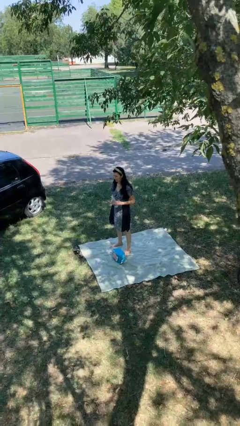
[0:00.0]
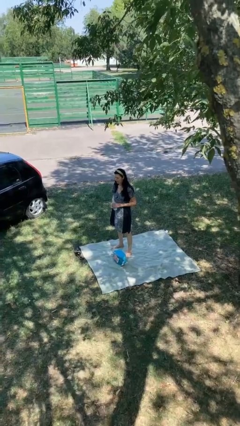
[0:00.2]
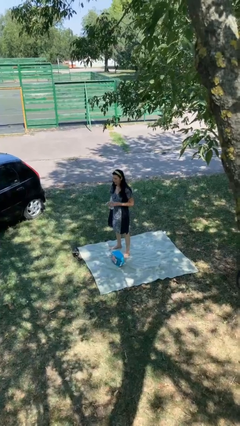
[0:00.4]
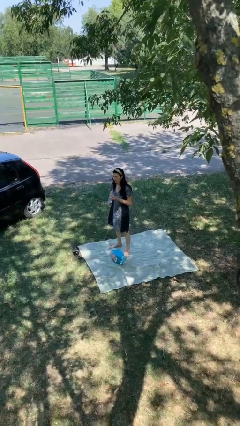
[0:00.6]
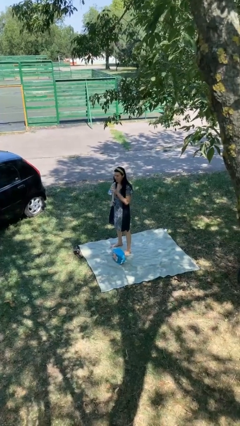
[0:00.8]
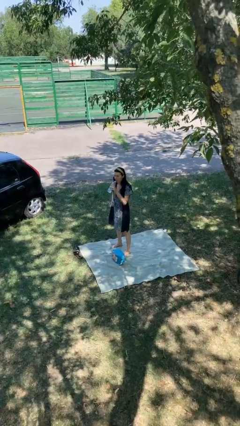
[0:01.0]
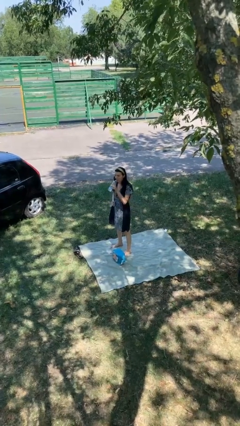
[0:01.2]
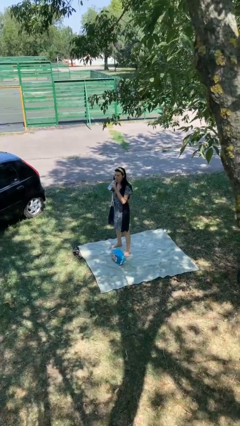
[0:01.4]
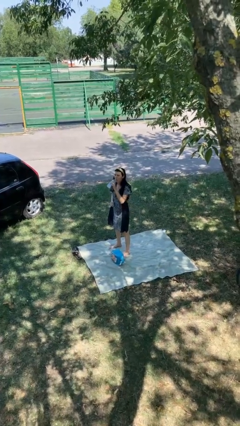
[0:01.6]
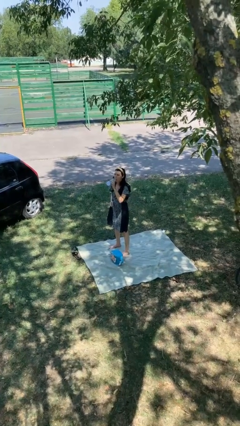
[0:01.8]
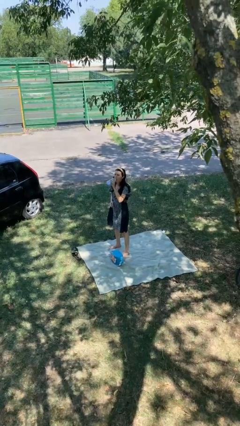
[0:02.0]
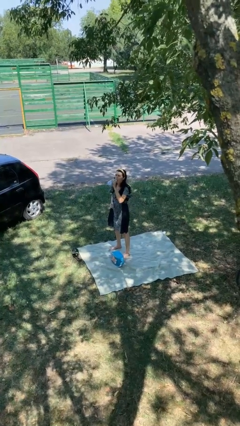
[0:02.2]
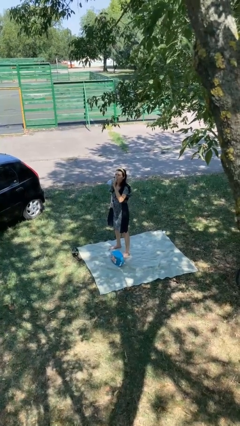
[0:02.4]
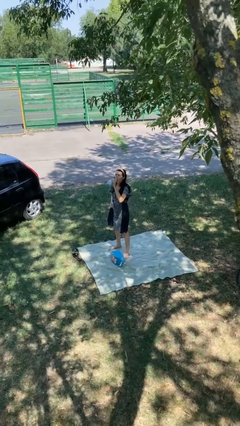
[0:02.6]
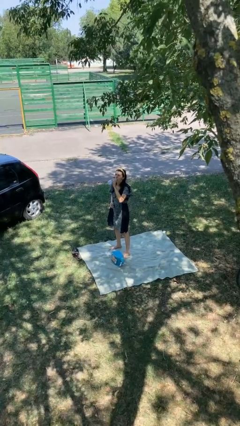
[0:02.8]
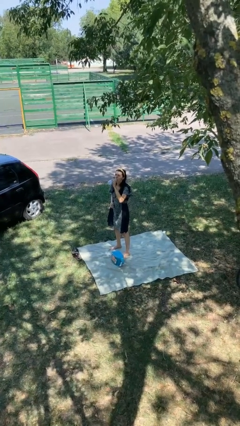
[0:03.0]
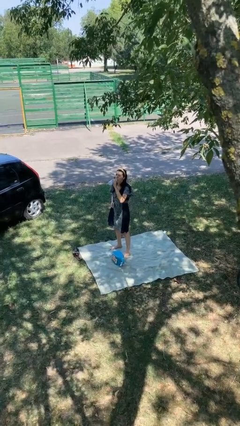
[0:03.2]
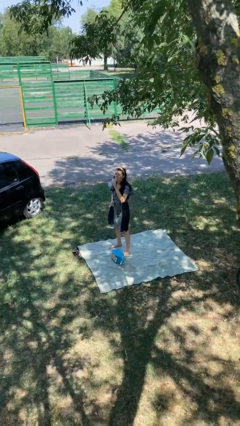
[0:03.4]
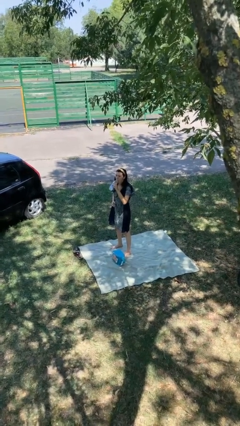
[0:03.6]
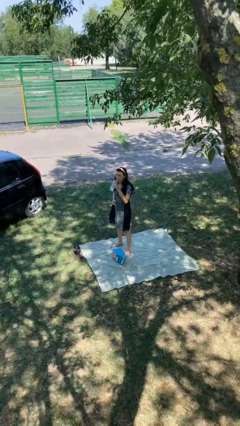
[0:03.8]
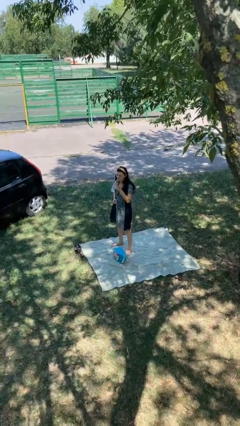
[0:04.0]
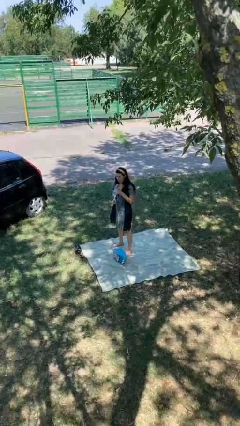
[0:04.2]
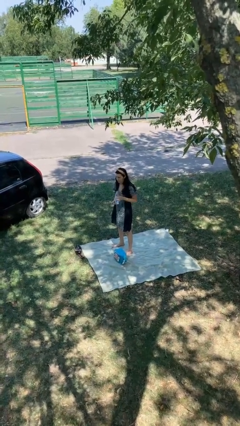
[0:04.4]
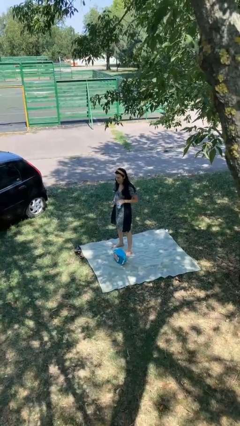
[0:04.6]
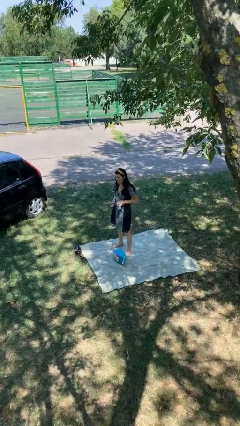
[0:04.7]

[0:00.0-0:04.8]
person drinks from bottle

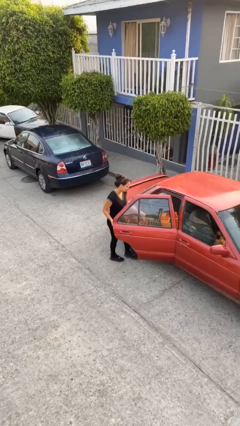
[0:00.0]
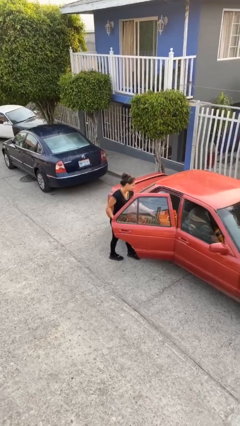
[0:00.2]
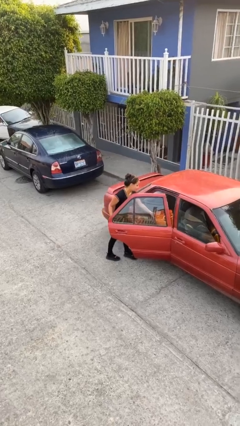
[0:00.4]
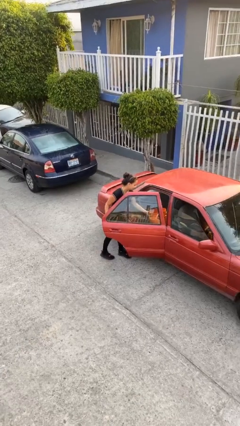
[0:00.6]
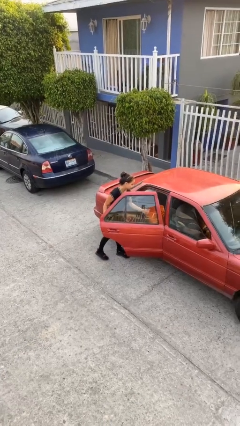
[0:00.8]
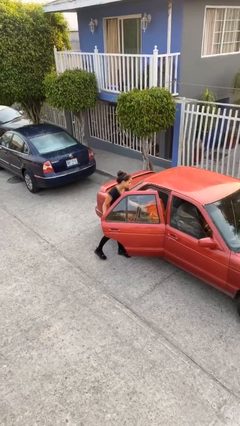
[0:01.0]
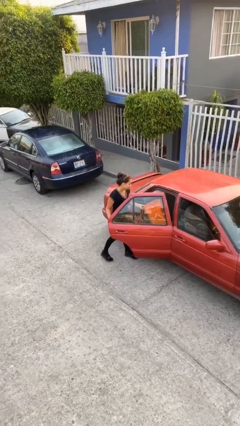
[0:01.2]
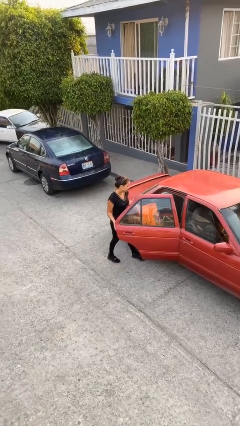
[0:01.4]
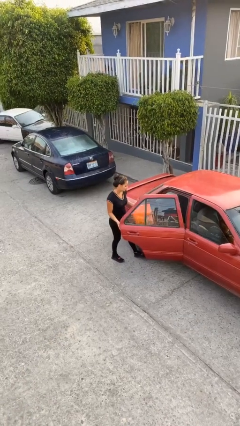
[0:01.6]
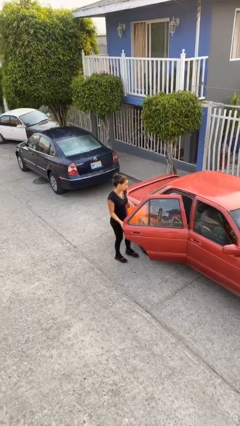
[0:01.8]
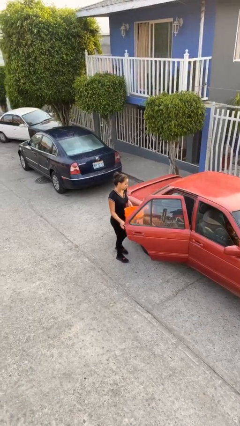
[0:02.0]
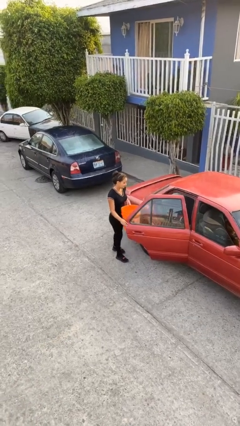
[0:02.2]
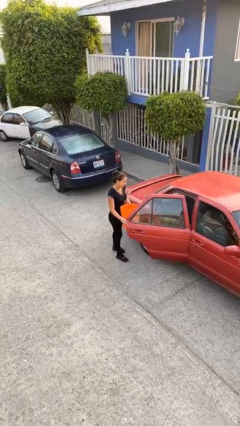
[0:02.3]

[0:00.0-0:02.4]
person unloads car

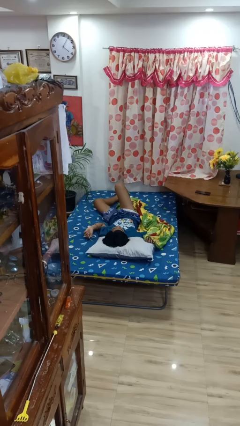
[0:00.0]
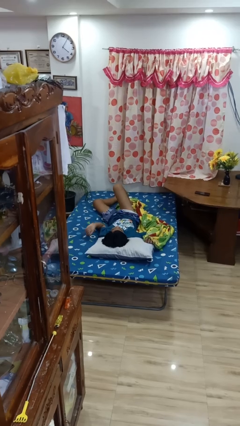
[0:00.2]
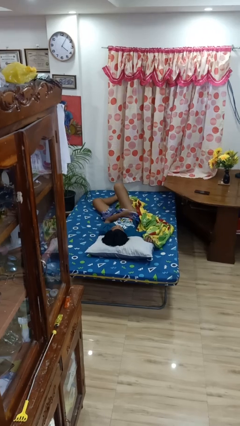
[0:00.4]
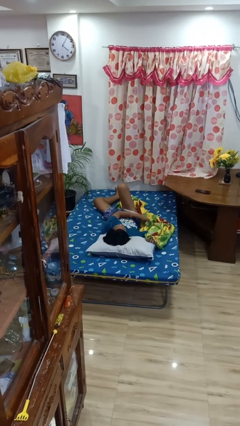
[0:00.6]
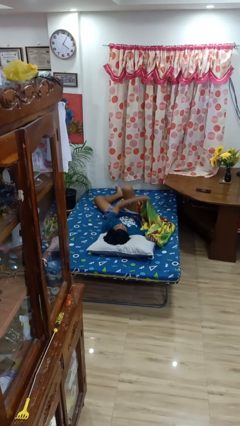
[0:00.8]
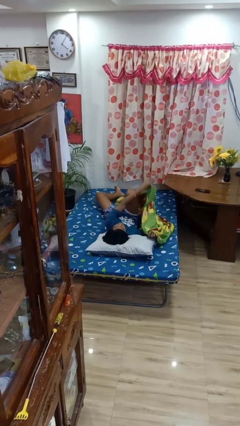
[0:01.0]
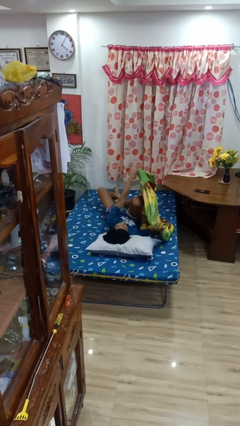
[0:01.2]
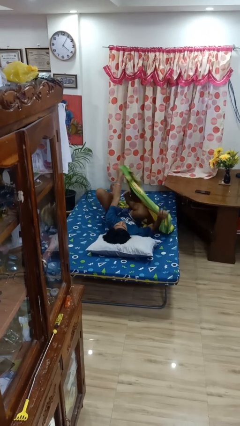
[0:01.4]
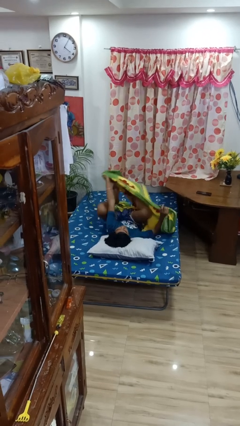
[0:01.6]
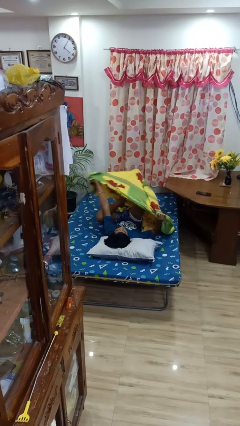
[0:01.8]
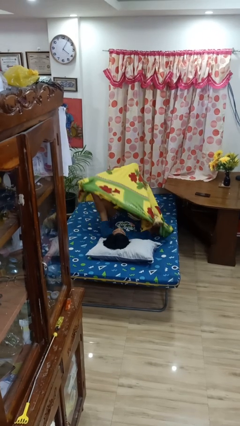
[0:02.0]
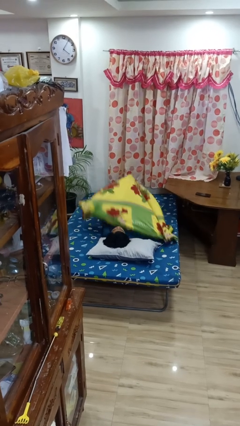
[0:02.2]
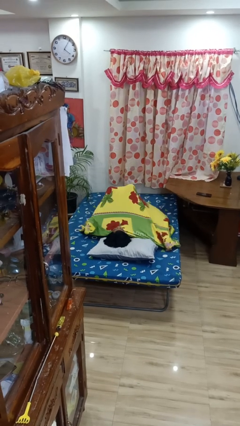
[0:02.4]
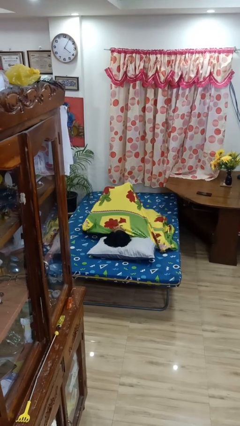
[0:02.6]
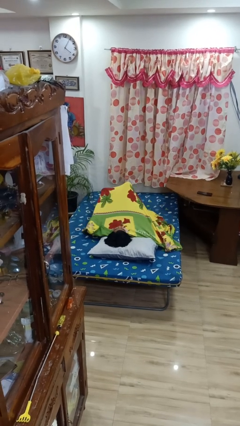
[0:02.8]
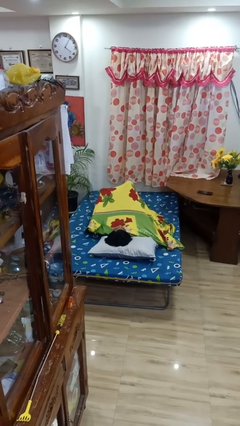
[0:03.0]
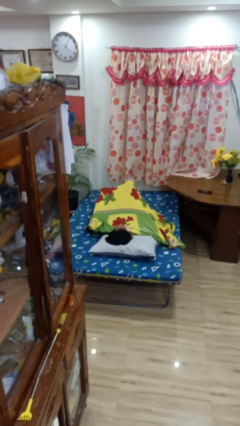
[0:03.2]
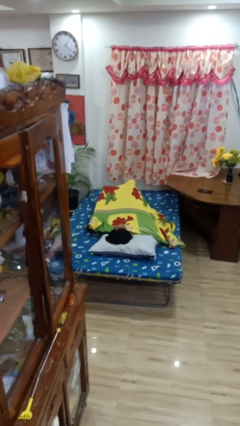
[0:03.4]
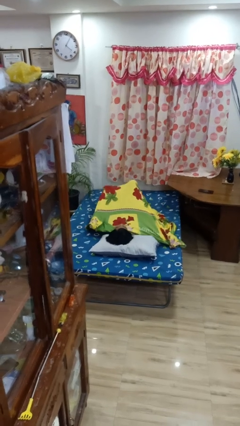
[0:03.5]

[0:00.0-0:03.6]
person covers with bedsheets

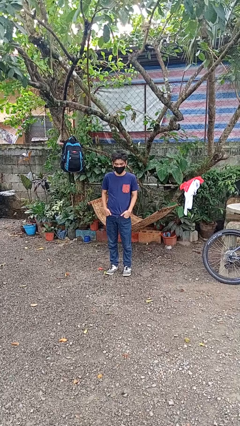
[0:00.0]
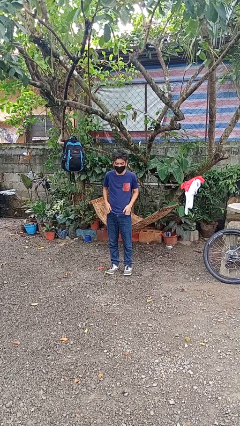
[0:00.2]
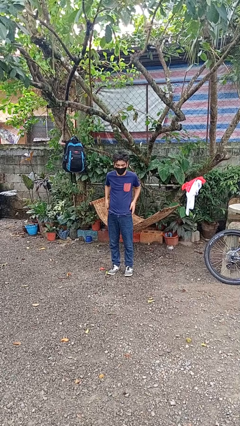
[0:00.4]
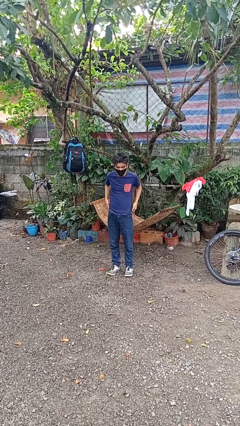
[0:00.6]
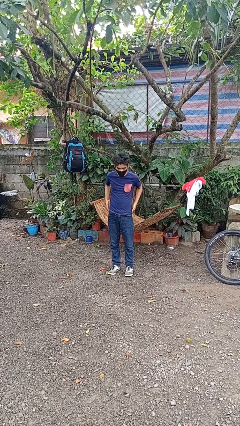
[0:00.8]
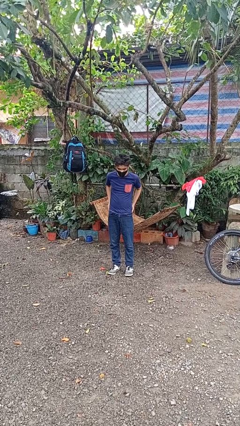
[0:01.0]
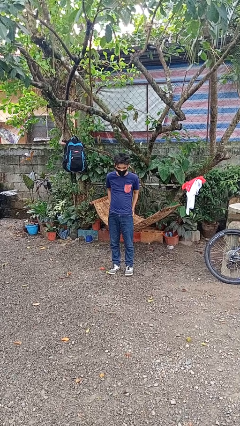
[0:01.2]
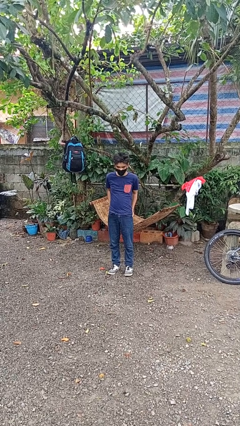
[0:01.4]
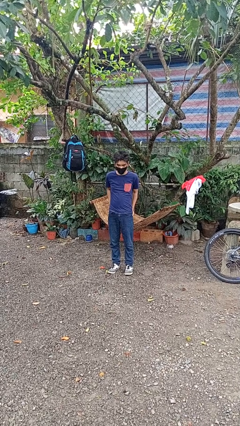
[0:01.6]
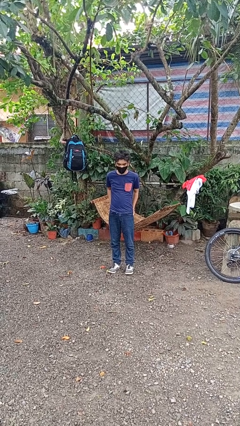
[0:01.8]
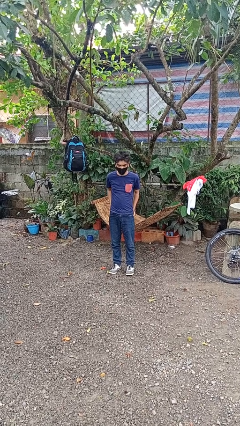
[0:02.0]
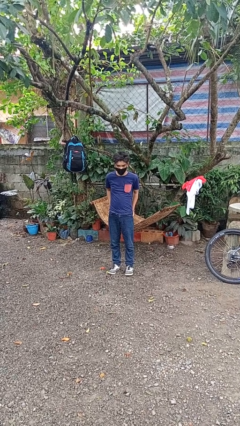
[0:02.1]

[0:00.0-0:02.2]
person puts hands in back pockets

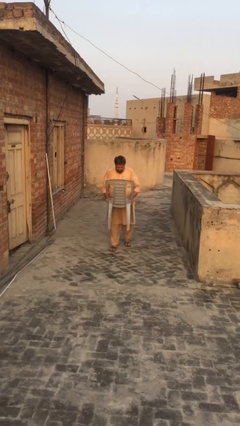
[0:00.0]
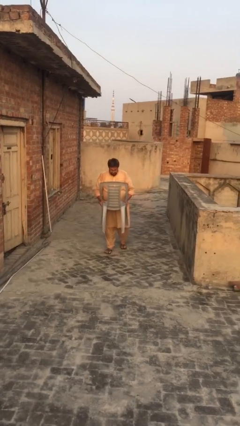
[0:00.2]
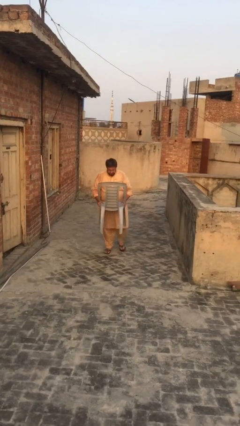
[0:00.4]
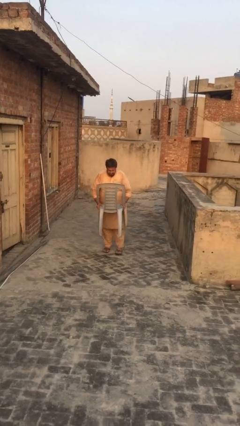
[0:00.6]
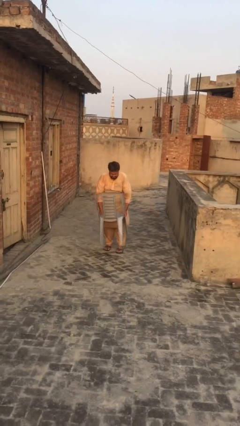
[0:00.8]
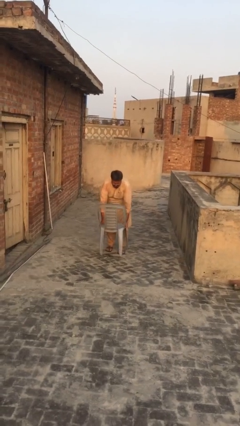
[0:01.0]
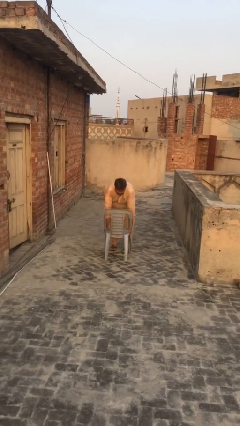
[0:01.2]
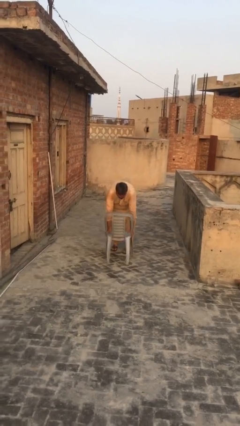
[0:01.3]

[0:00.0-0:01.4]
person puts down object on floor

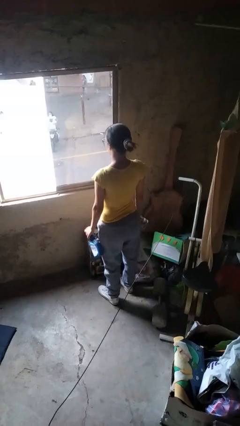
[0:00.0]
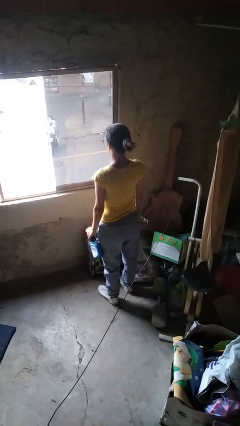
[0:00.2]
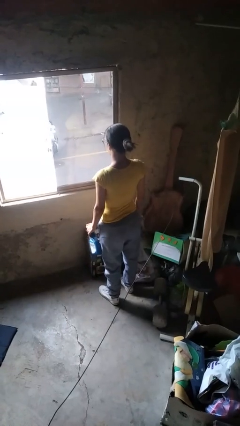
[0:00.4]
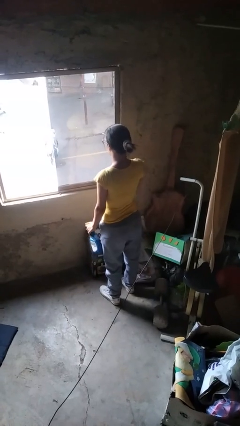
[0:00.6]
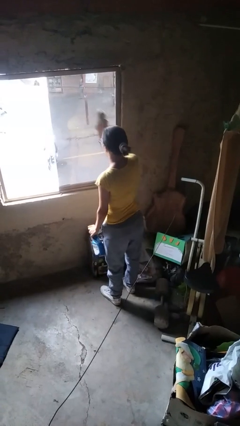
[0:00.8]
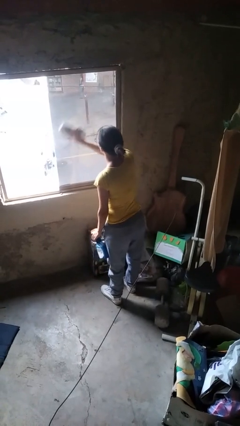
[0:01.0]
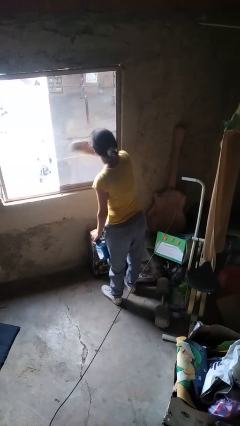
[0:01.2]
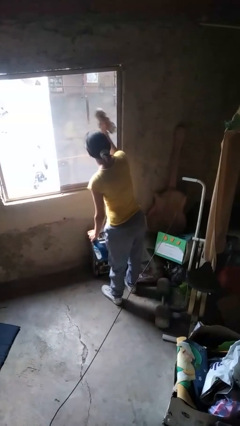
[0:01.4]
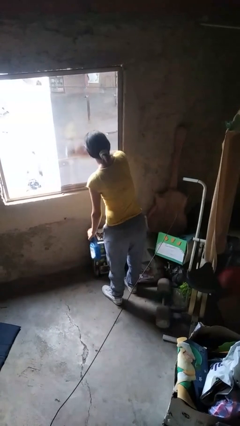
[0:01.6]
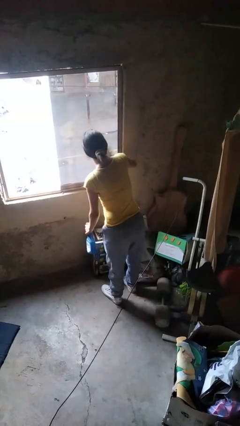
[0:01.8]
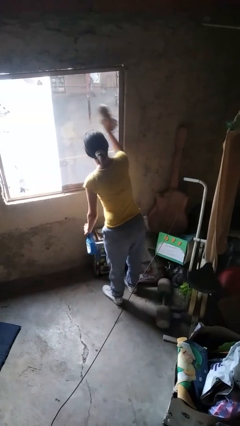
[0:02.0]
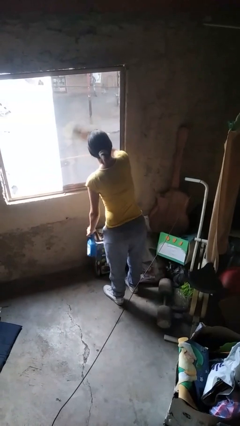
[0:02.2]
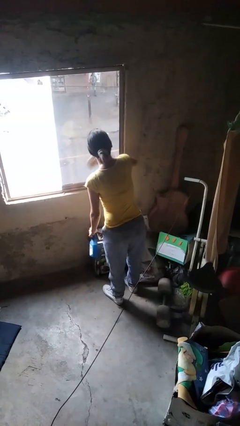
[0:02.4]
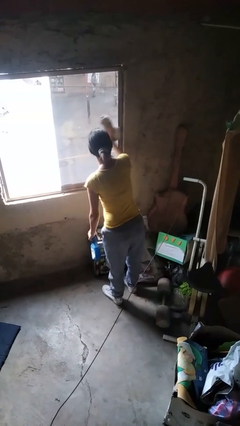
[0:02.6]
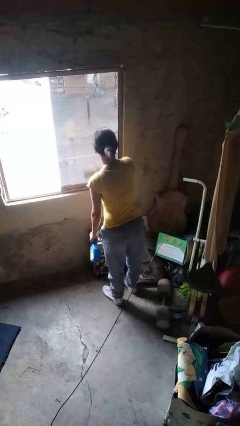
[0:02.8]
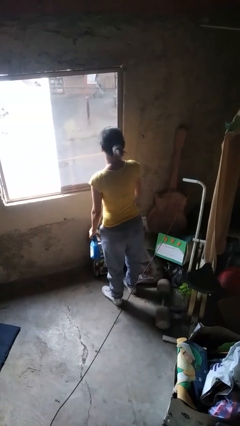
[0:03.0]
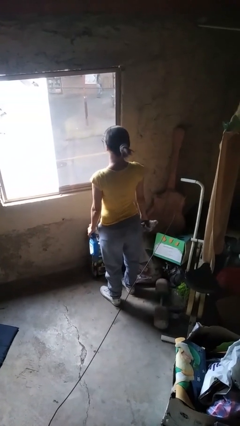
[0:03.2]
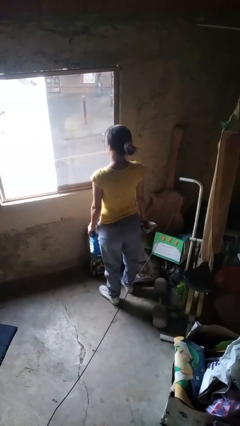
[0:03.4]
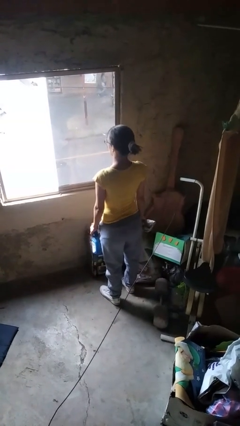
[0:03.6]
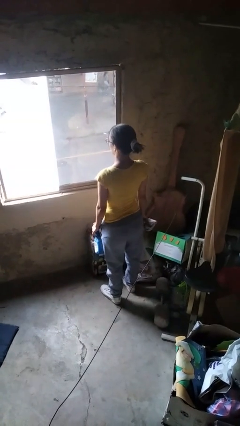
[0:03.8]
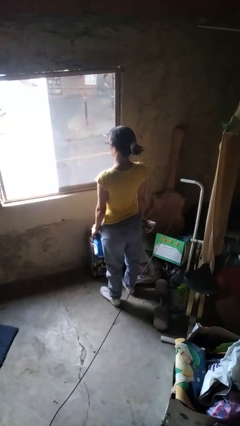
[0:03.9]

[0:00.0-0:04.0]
person washes window
